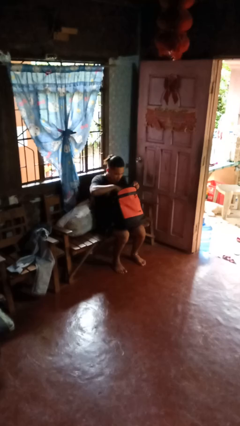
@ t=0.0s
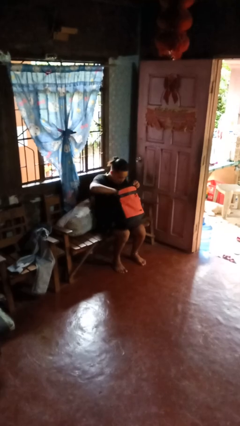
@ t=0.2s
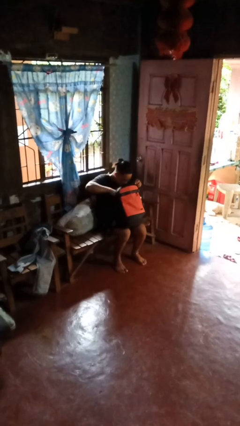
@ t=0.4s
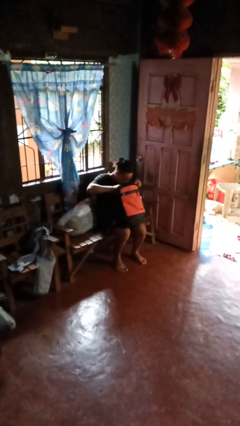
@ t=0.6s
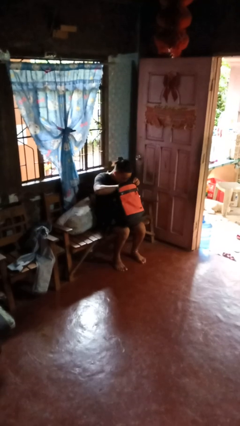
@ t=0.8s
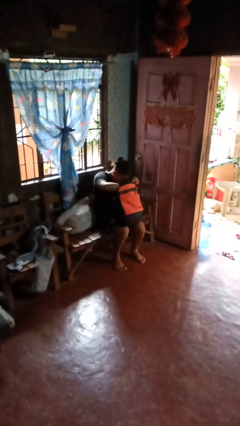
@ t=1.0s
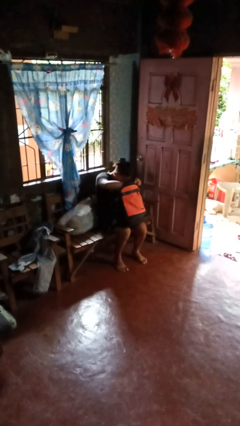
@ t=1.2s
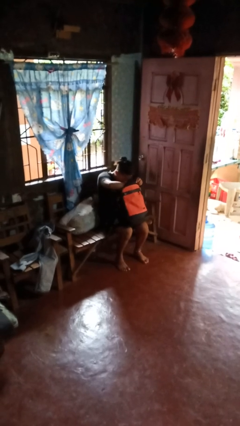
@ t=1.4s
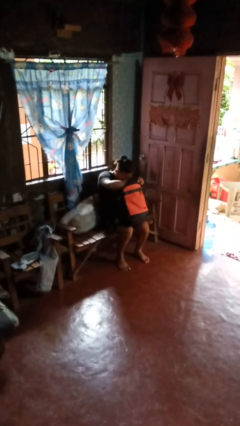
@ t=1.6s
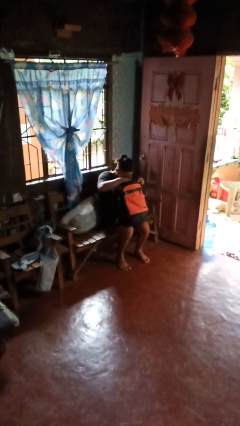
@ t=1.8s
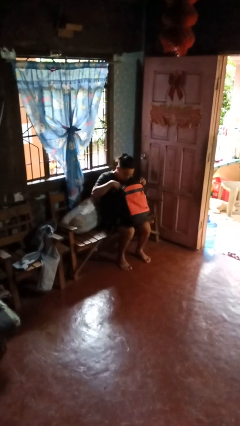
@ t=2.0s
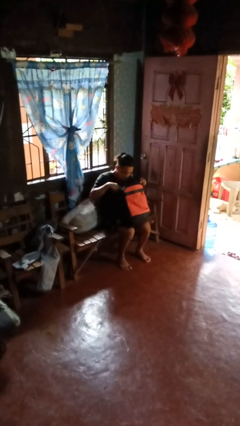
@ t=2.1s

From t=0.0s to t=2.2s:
person searches in bag

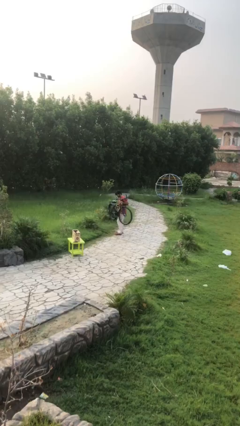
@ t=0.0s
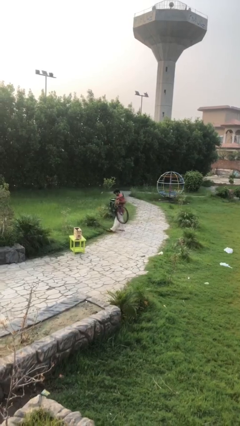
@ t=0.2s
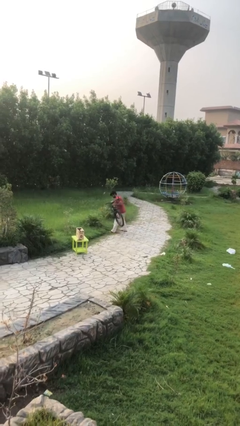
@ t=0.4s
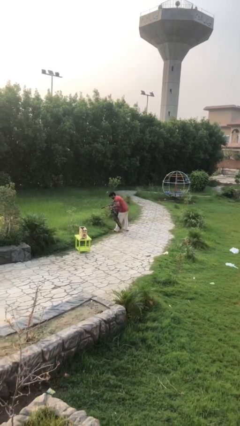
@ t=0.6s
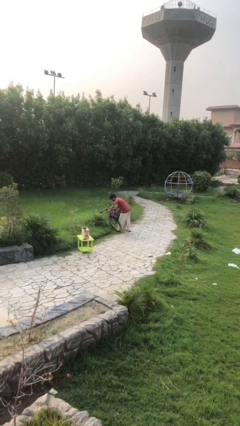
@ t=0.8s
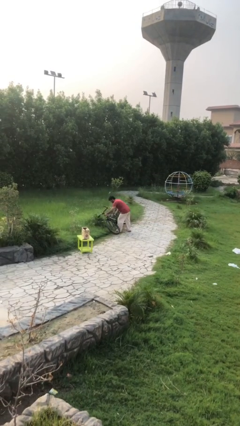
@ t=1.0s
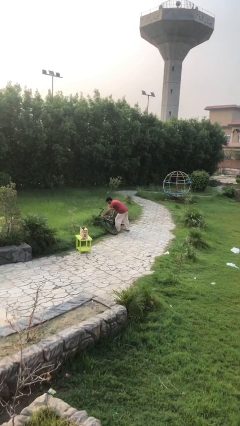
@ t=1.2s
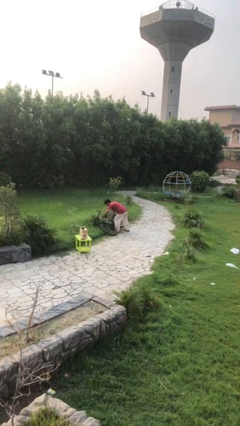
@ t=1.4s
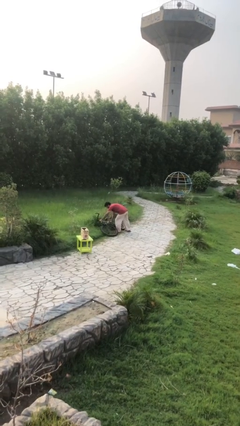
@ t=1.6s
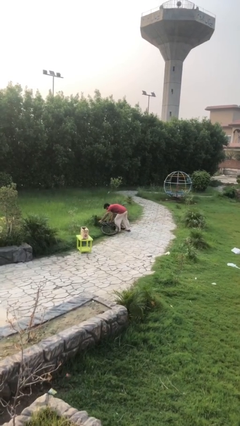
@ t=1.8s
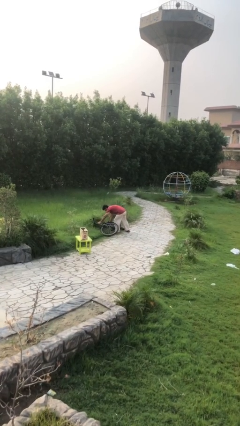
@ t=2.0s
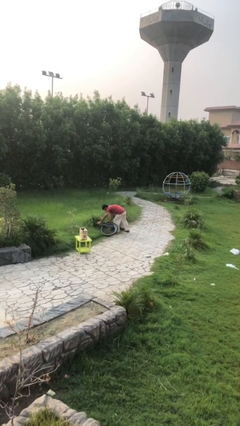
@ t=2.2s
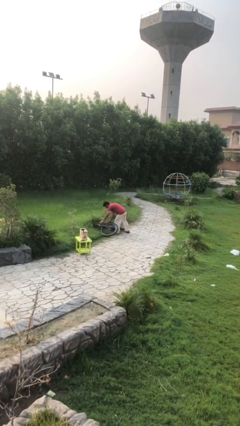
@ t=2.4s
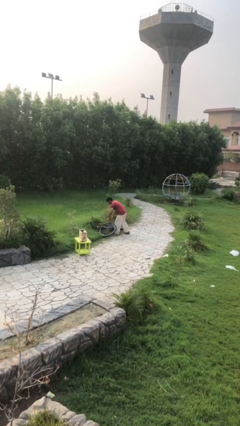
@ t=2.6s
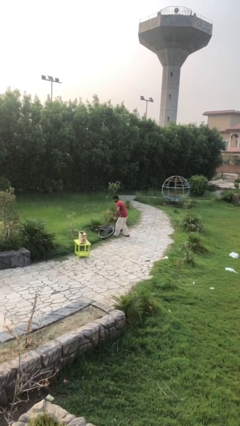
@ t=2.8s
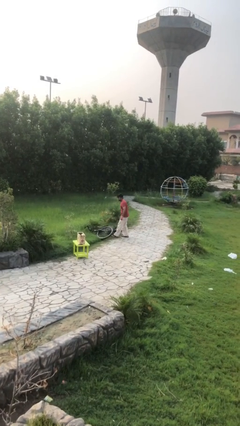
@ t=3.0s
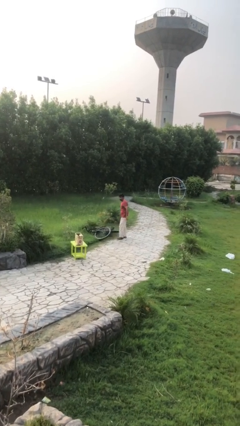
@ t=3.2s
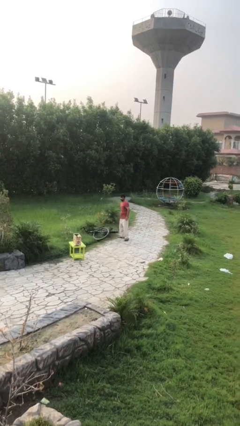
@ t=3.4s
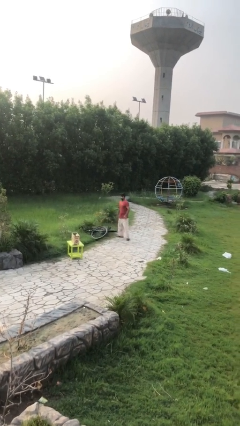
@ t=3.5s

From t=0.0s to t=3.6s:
person puts down object on floor

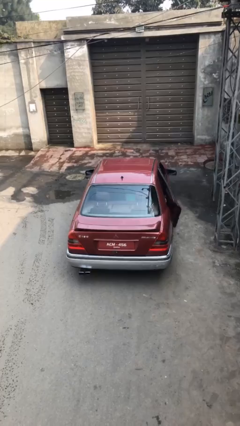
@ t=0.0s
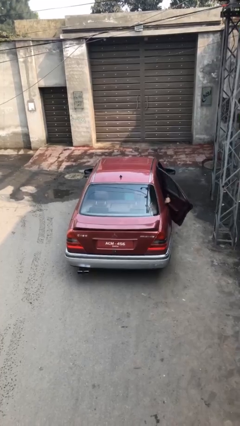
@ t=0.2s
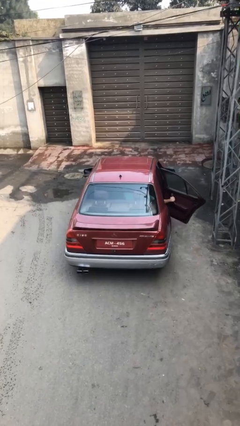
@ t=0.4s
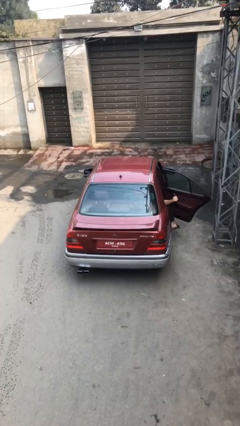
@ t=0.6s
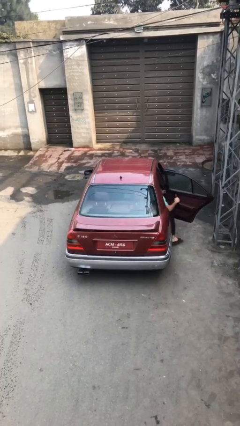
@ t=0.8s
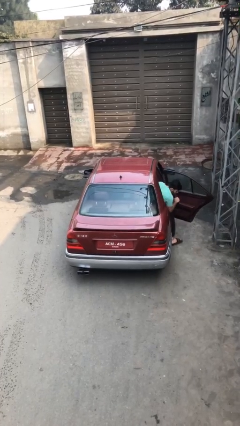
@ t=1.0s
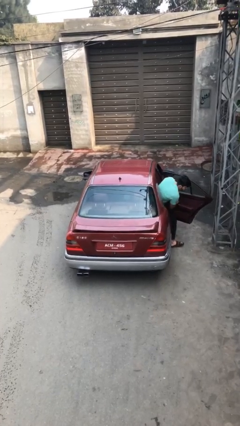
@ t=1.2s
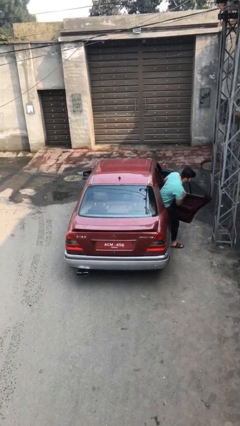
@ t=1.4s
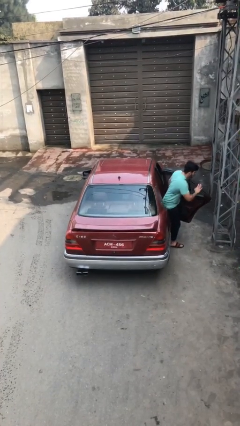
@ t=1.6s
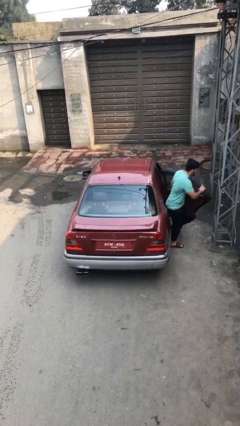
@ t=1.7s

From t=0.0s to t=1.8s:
car drops off person

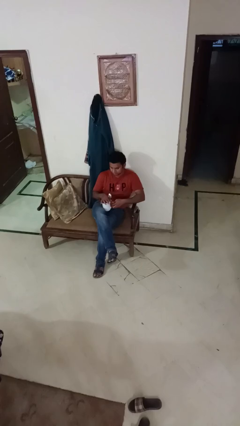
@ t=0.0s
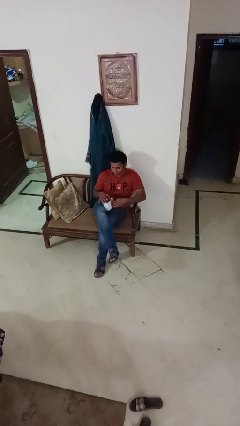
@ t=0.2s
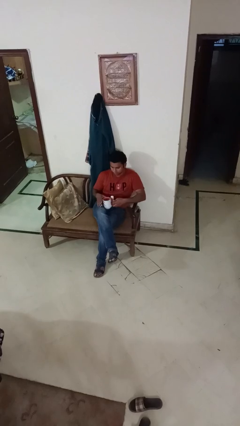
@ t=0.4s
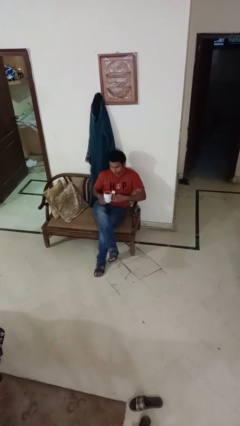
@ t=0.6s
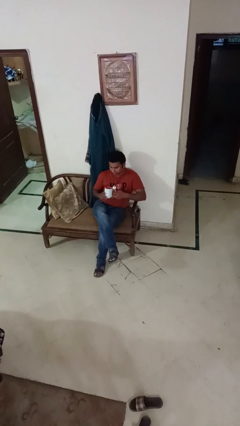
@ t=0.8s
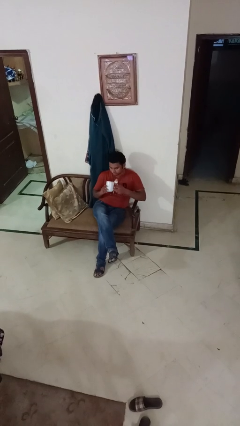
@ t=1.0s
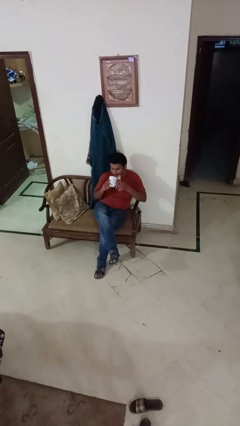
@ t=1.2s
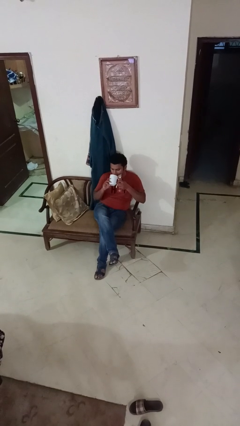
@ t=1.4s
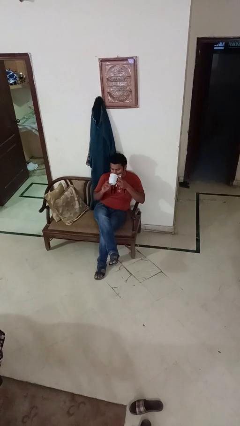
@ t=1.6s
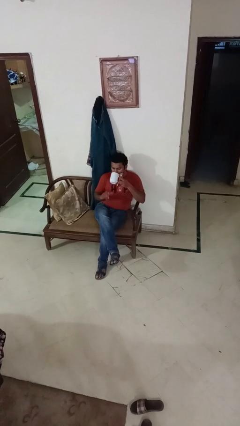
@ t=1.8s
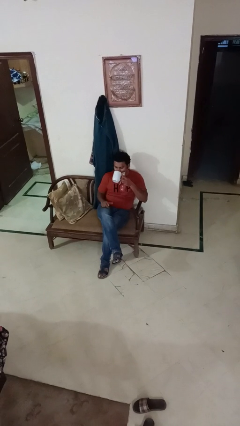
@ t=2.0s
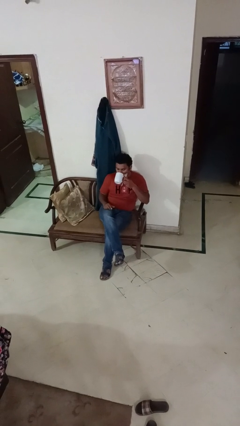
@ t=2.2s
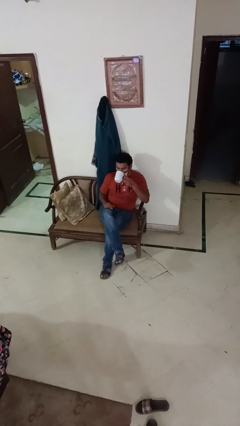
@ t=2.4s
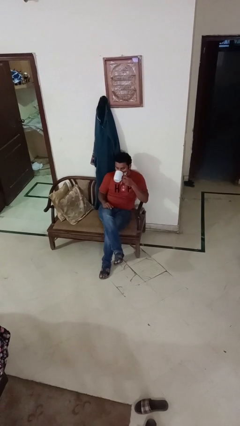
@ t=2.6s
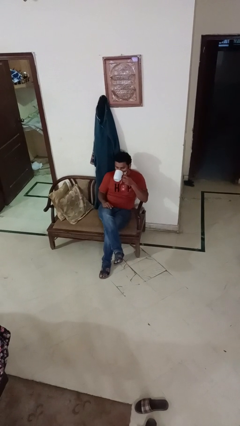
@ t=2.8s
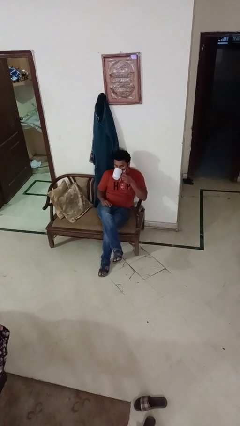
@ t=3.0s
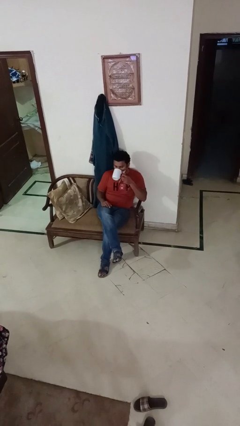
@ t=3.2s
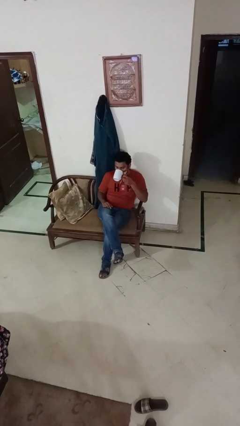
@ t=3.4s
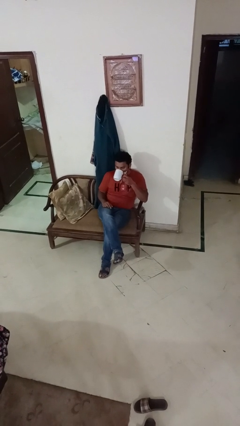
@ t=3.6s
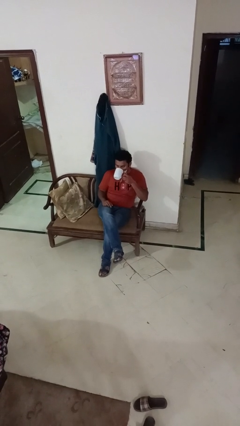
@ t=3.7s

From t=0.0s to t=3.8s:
person drinks from mug

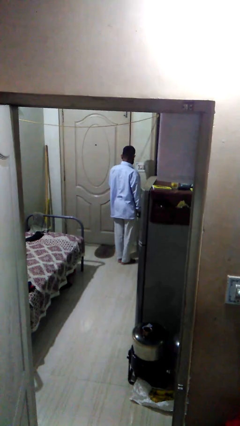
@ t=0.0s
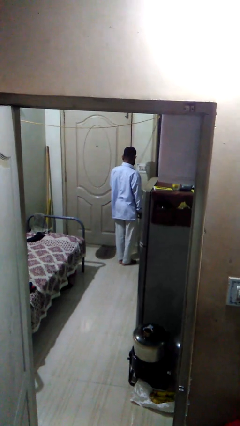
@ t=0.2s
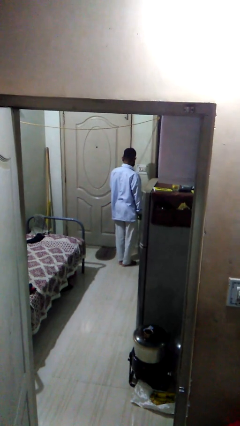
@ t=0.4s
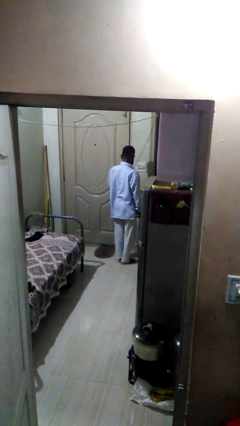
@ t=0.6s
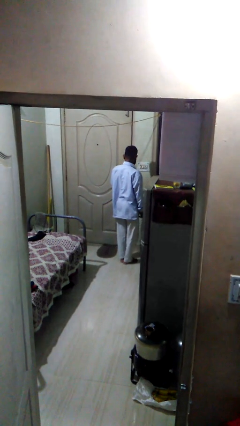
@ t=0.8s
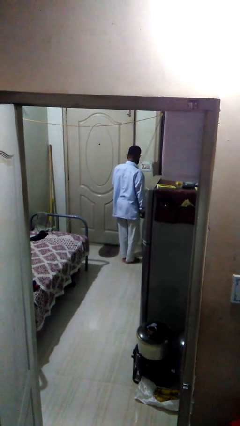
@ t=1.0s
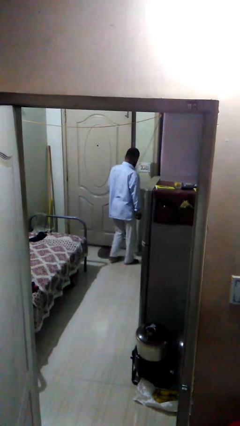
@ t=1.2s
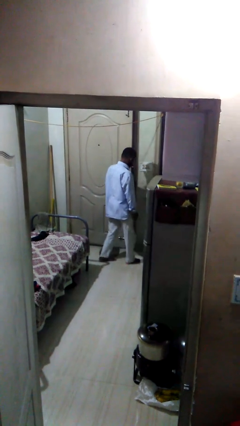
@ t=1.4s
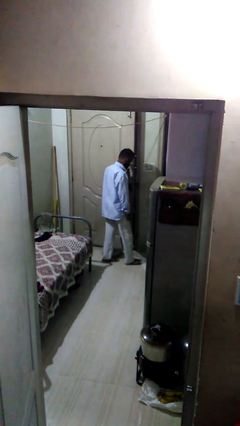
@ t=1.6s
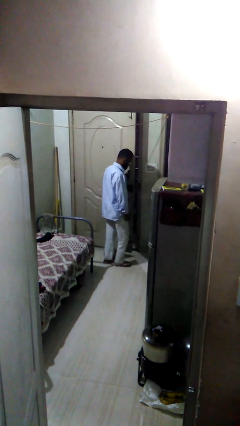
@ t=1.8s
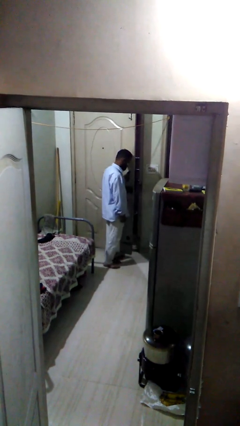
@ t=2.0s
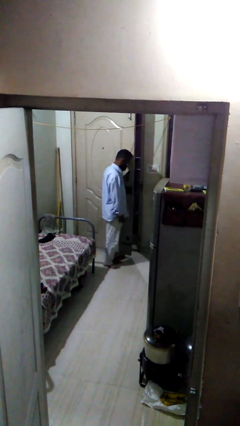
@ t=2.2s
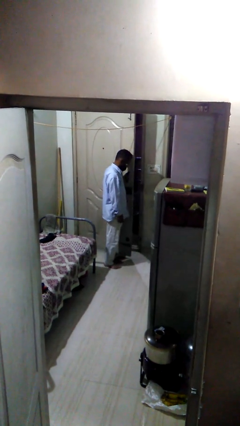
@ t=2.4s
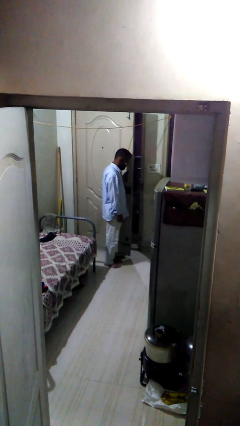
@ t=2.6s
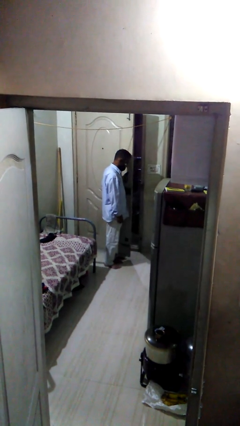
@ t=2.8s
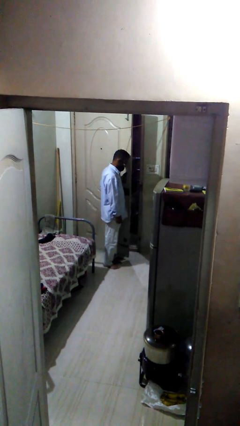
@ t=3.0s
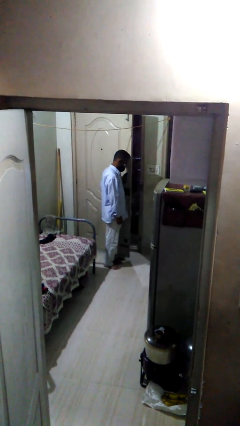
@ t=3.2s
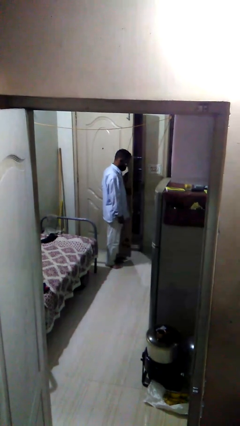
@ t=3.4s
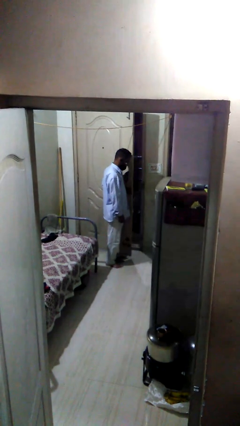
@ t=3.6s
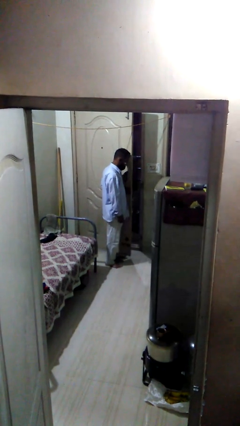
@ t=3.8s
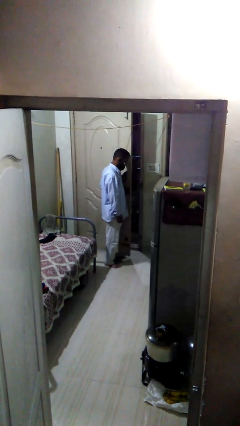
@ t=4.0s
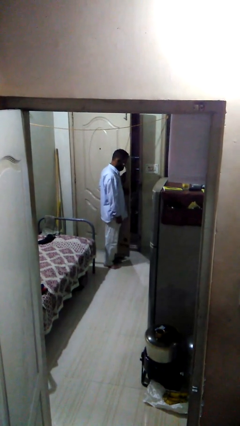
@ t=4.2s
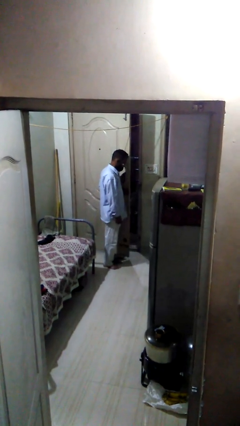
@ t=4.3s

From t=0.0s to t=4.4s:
person opens facility door

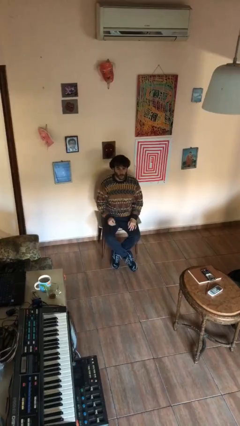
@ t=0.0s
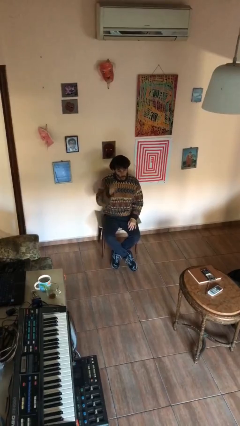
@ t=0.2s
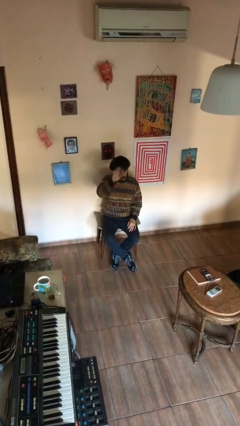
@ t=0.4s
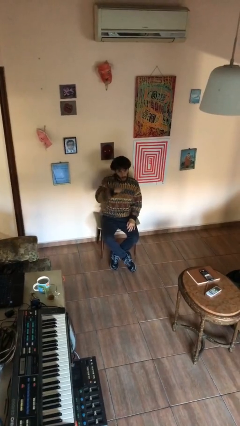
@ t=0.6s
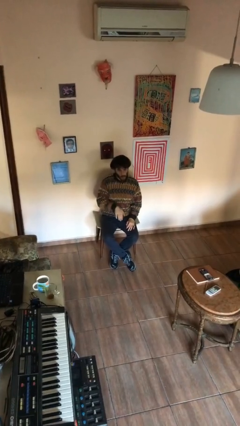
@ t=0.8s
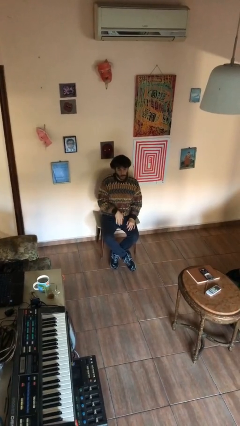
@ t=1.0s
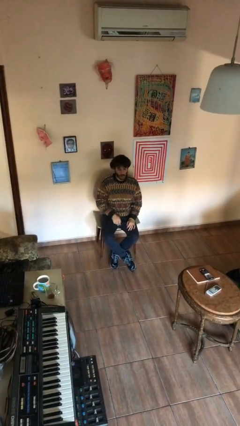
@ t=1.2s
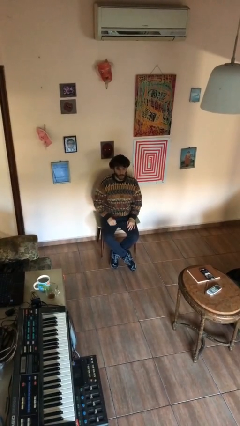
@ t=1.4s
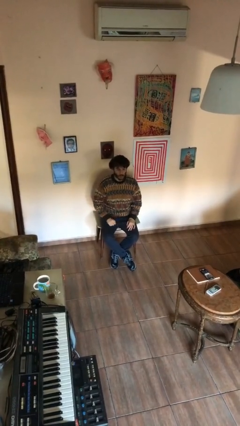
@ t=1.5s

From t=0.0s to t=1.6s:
person gestures swipe down
